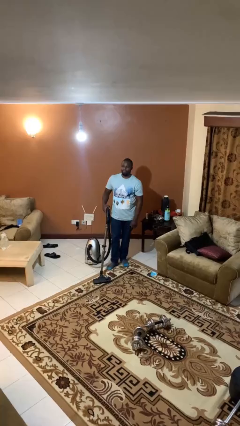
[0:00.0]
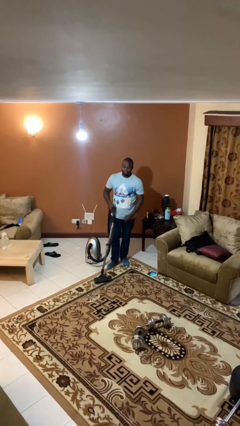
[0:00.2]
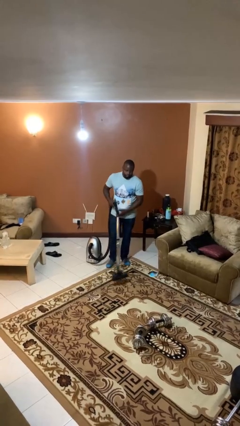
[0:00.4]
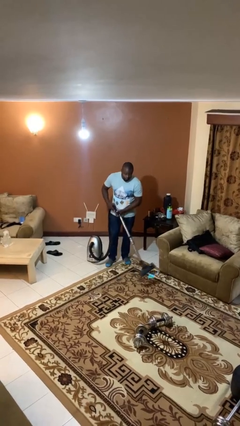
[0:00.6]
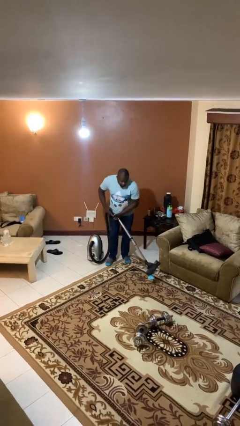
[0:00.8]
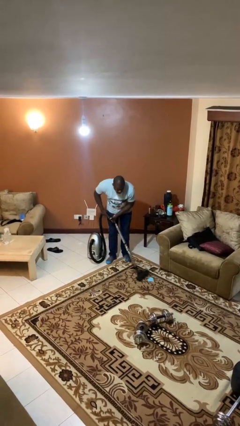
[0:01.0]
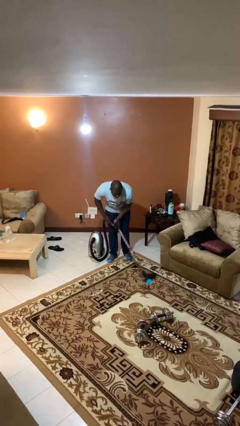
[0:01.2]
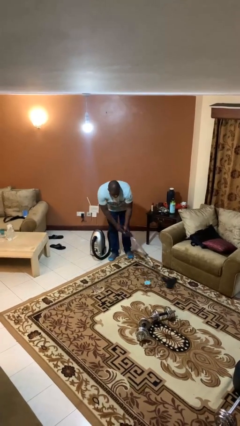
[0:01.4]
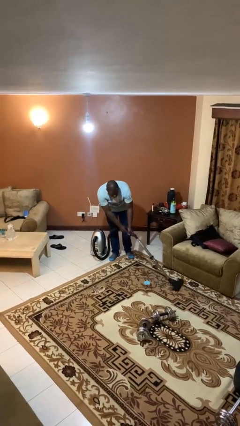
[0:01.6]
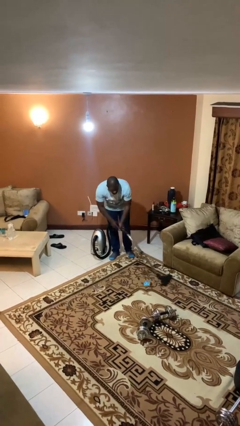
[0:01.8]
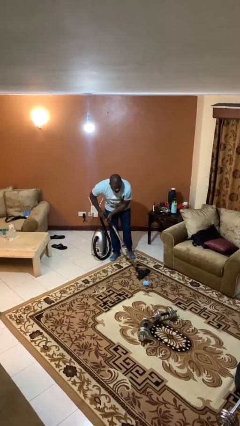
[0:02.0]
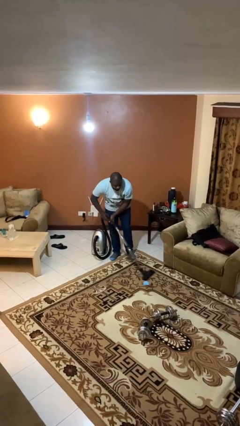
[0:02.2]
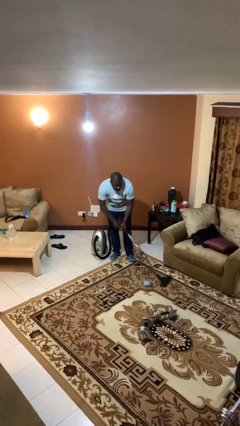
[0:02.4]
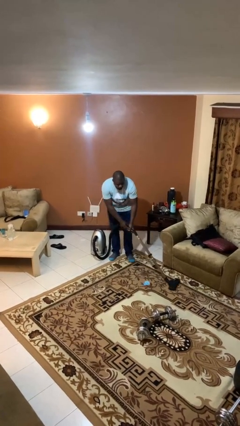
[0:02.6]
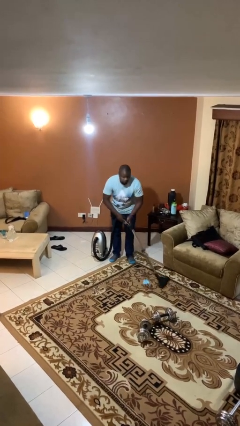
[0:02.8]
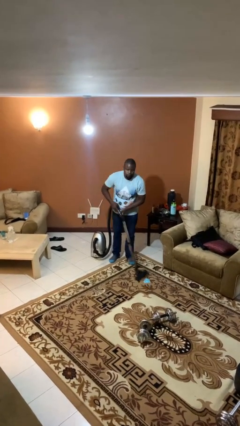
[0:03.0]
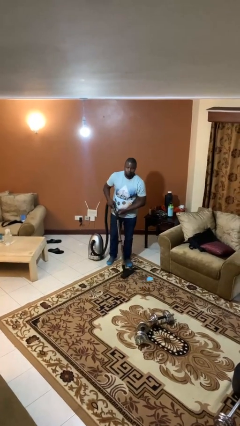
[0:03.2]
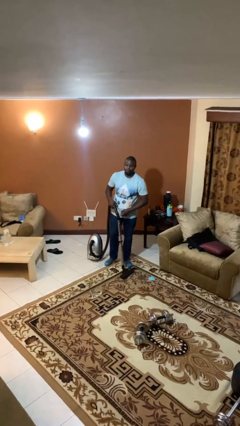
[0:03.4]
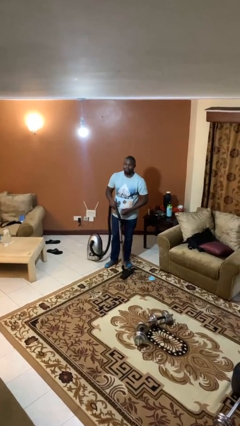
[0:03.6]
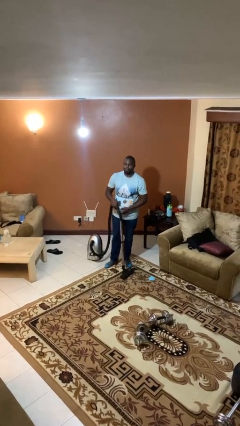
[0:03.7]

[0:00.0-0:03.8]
person vacuums carpet

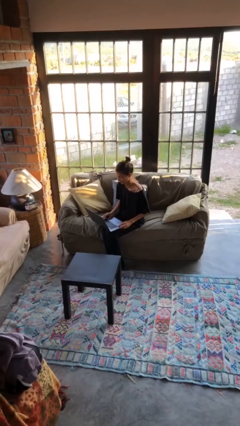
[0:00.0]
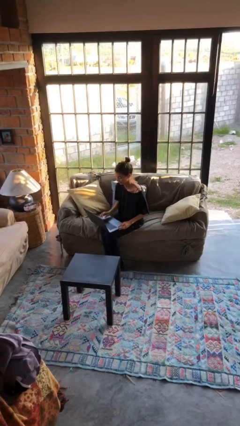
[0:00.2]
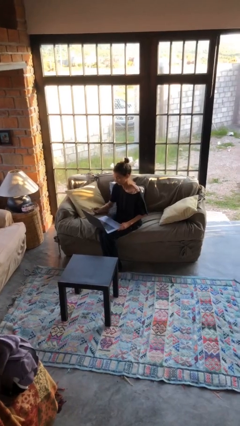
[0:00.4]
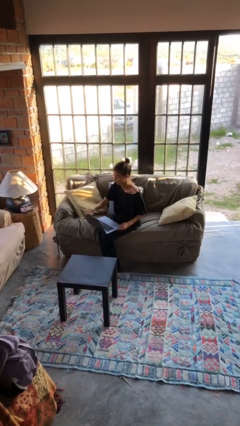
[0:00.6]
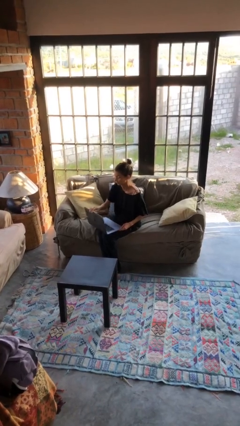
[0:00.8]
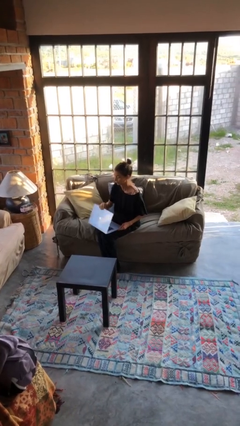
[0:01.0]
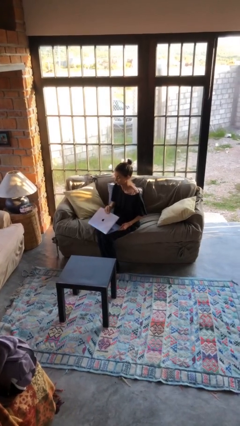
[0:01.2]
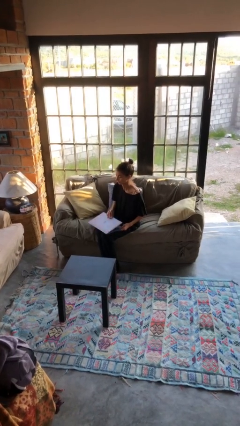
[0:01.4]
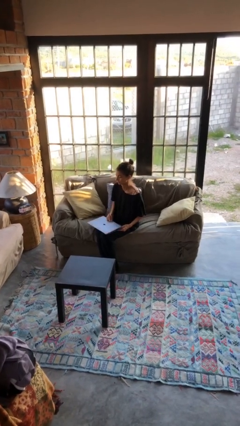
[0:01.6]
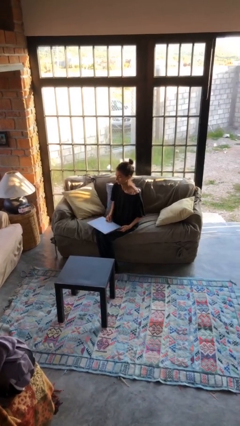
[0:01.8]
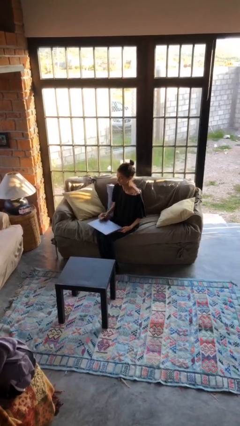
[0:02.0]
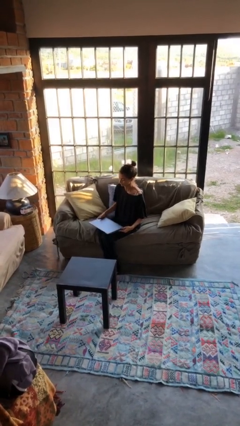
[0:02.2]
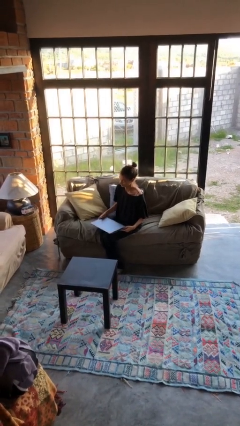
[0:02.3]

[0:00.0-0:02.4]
person closes laptop

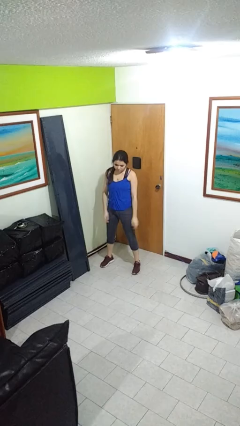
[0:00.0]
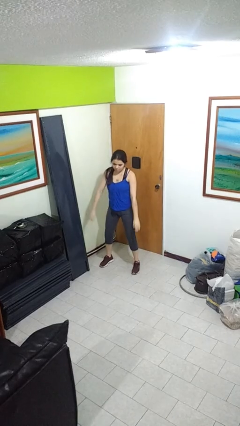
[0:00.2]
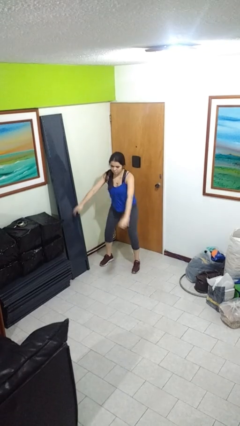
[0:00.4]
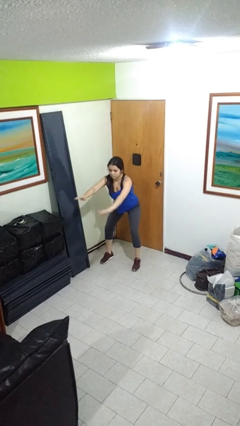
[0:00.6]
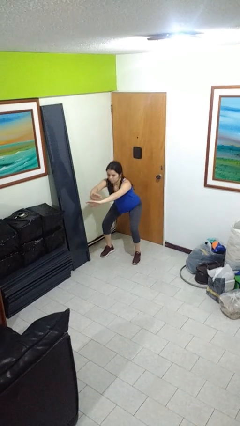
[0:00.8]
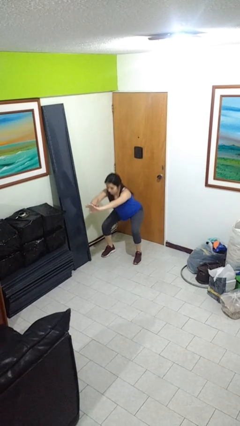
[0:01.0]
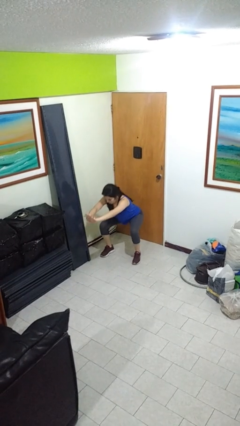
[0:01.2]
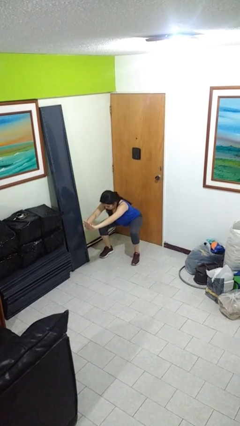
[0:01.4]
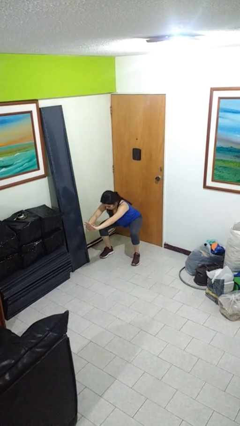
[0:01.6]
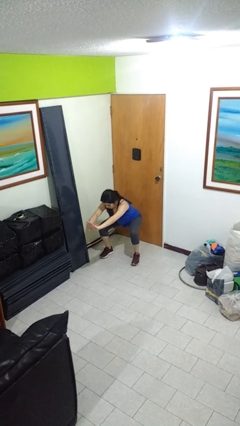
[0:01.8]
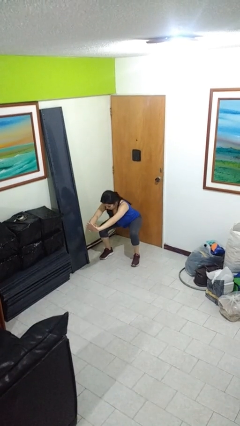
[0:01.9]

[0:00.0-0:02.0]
person squats

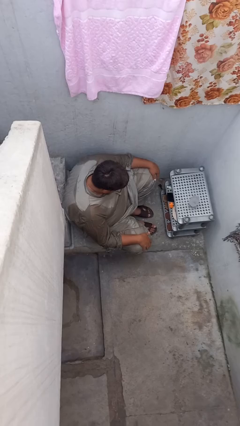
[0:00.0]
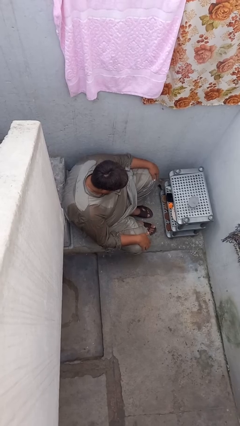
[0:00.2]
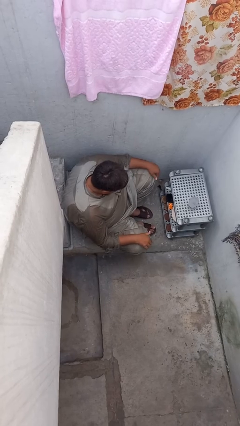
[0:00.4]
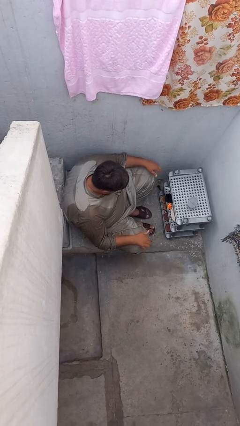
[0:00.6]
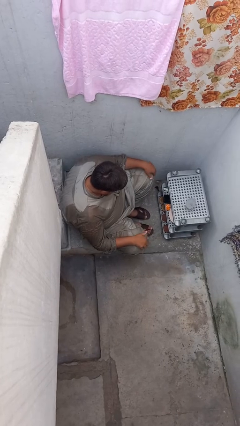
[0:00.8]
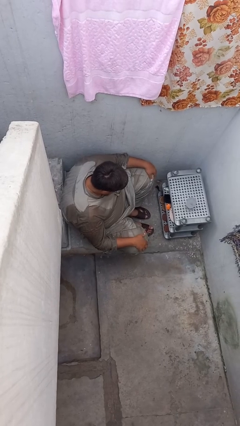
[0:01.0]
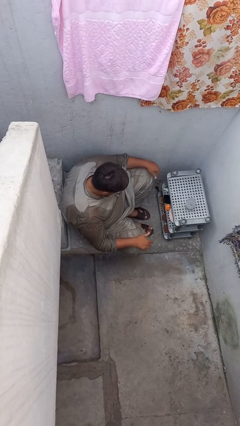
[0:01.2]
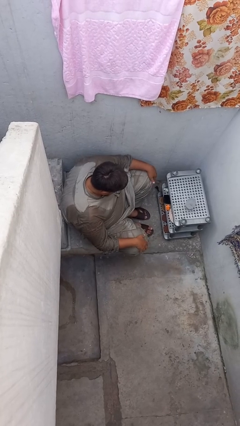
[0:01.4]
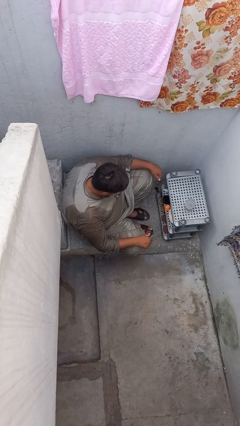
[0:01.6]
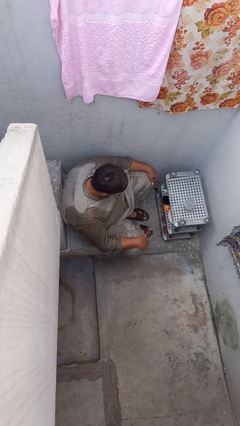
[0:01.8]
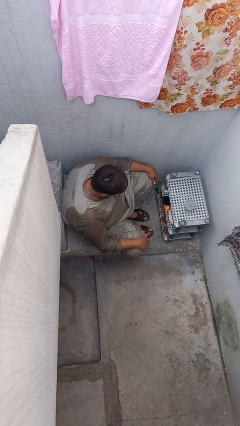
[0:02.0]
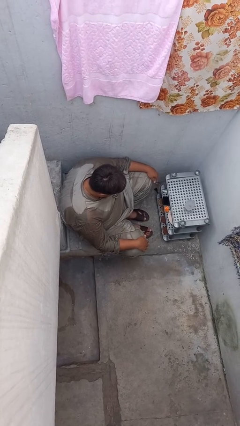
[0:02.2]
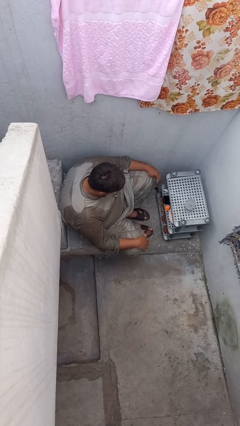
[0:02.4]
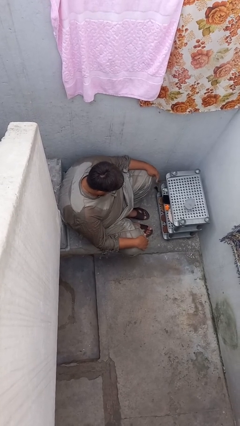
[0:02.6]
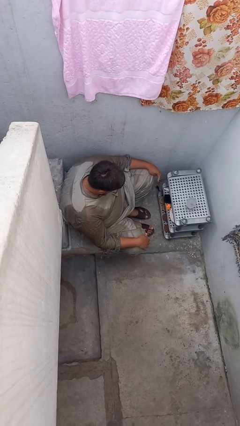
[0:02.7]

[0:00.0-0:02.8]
person slaps hands on thighs

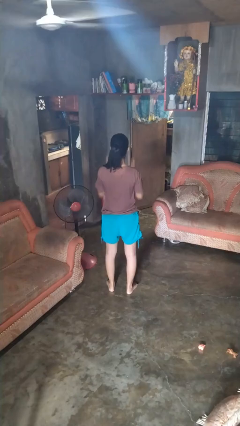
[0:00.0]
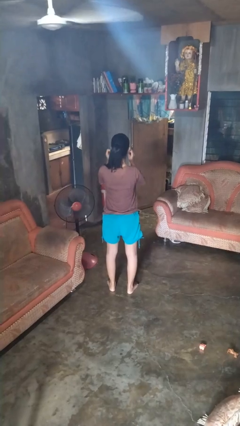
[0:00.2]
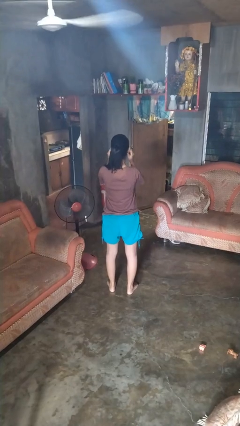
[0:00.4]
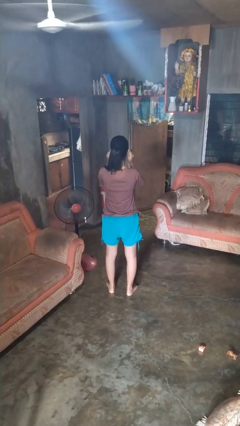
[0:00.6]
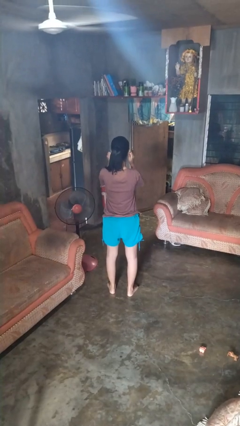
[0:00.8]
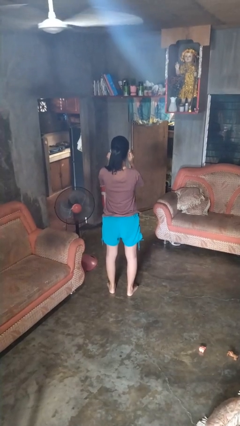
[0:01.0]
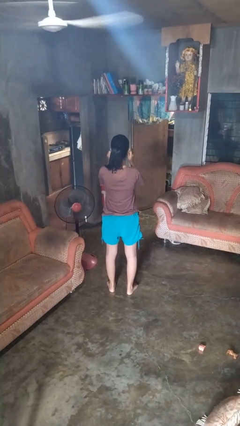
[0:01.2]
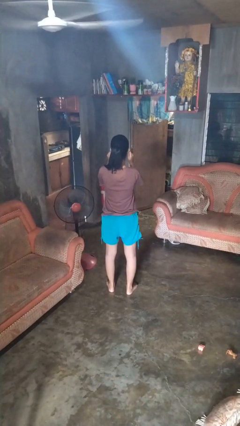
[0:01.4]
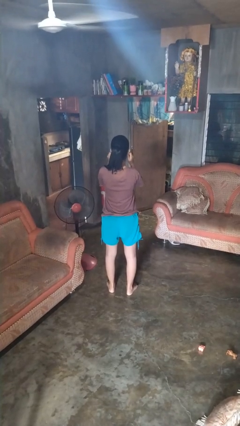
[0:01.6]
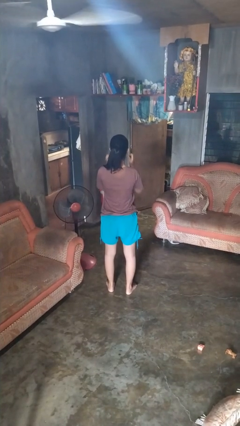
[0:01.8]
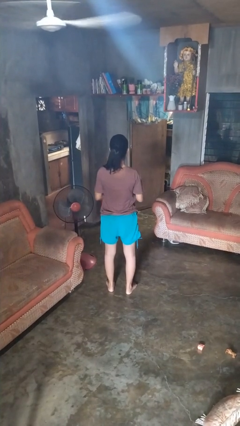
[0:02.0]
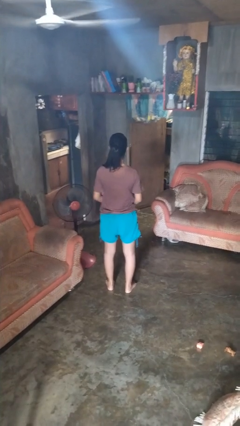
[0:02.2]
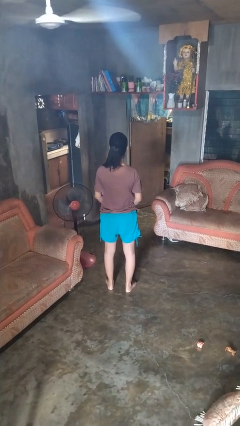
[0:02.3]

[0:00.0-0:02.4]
person touches earlobe

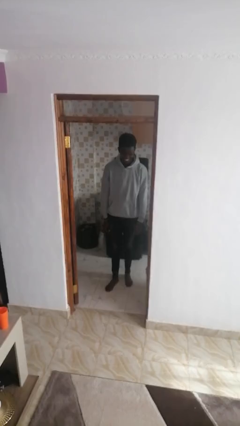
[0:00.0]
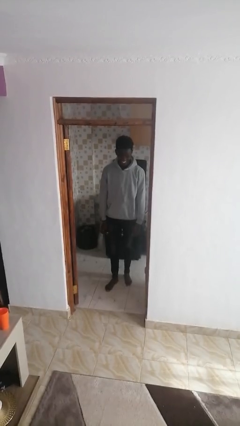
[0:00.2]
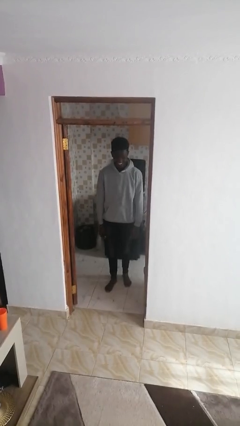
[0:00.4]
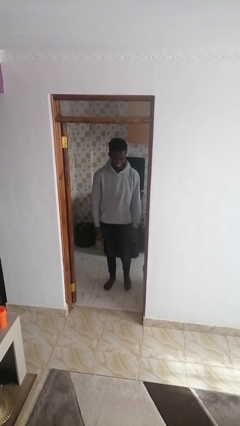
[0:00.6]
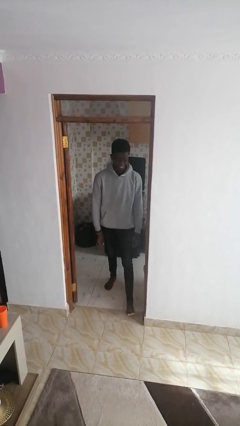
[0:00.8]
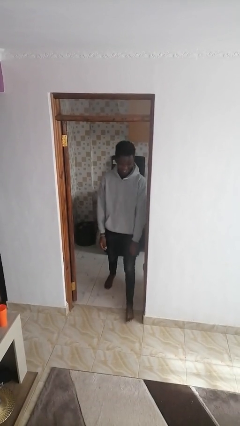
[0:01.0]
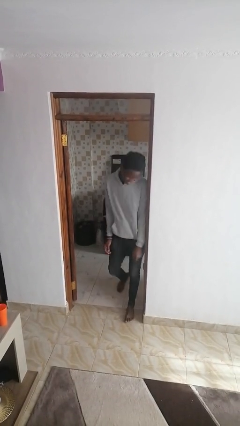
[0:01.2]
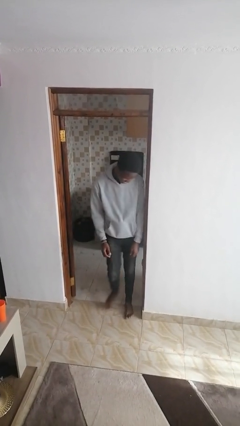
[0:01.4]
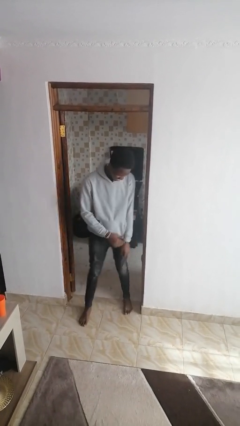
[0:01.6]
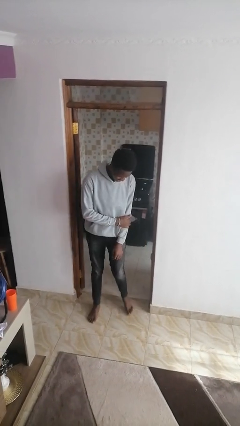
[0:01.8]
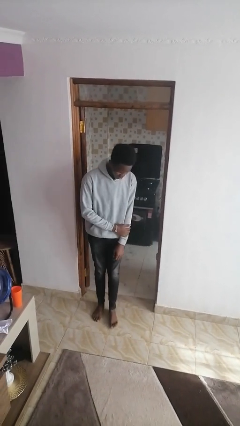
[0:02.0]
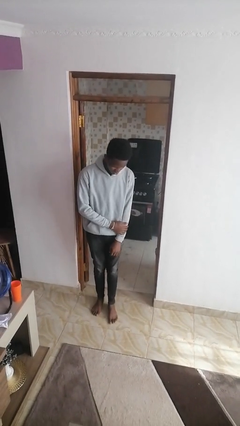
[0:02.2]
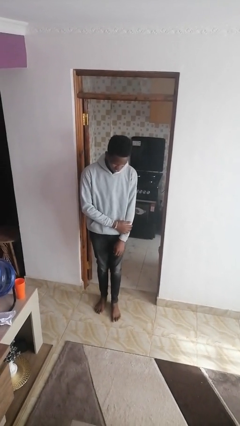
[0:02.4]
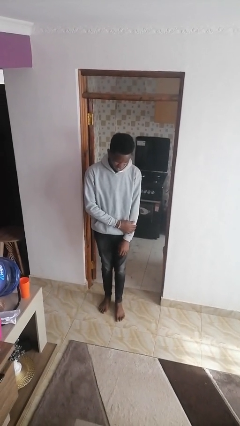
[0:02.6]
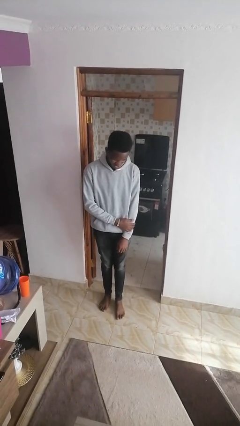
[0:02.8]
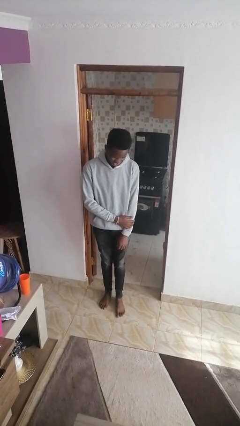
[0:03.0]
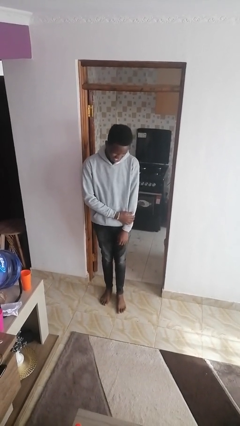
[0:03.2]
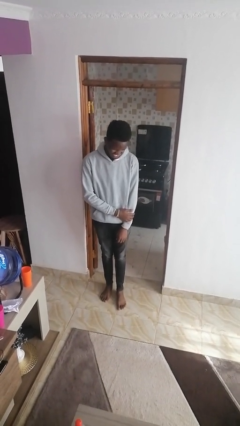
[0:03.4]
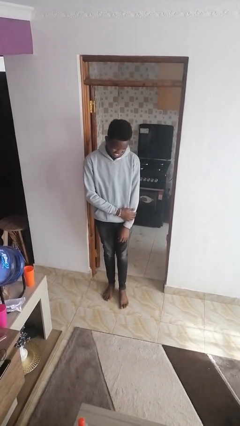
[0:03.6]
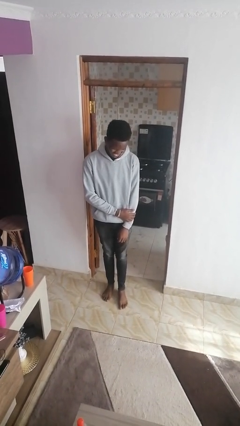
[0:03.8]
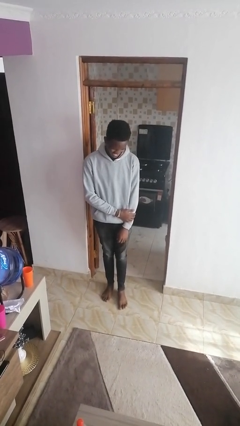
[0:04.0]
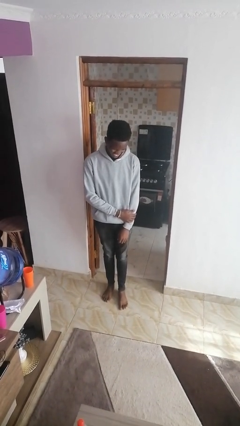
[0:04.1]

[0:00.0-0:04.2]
person bumps into wall

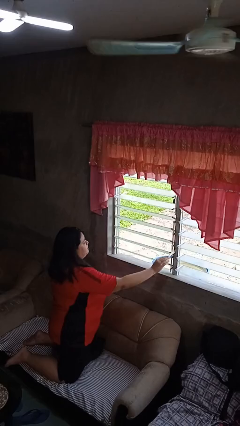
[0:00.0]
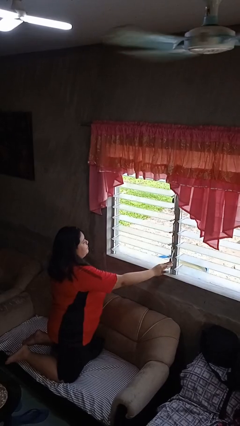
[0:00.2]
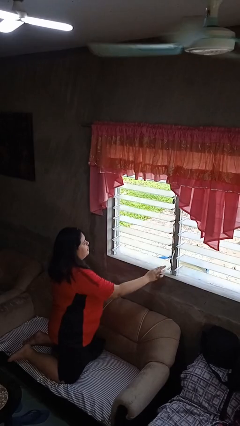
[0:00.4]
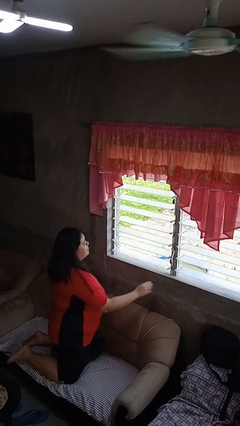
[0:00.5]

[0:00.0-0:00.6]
person opens home window
